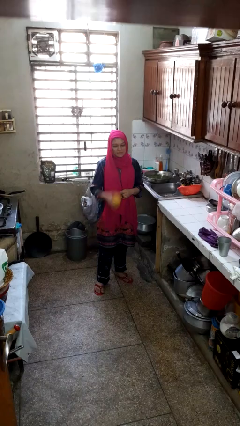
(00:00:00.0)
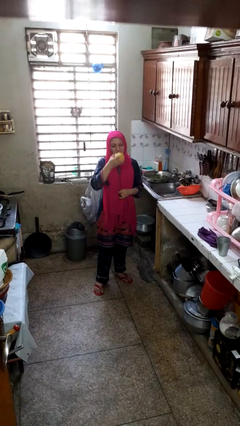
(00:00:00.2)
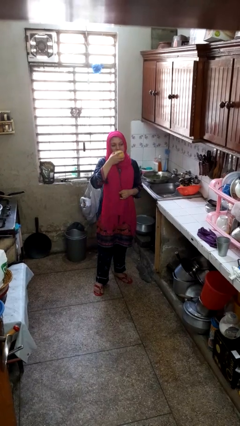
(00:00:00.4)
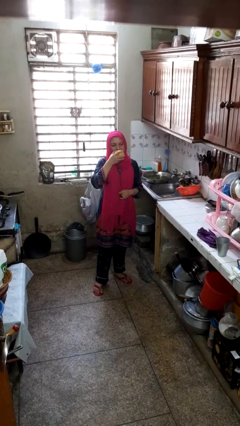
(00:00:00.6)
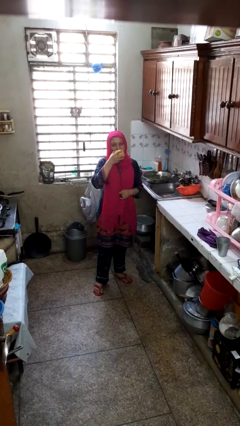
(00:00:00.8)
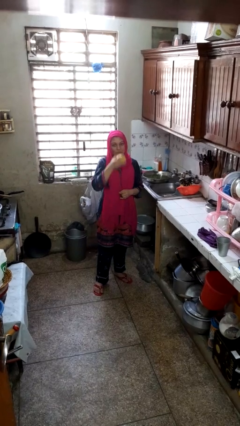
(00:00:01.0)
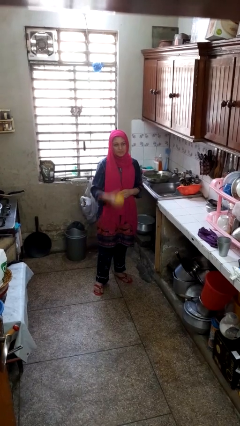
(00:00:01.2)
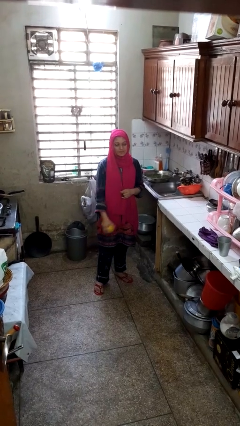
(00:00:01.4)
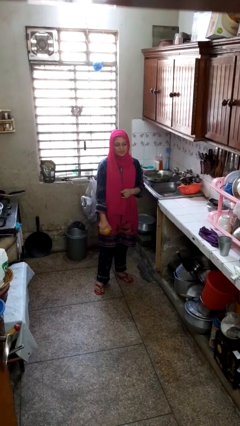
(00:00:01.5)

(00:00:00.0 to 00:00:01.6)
person eats apple

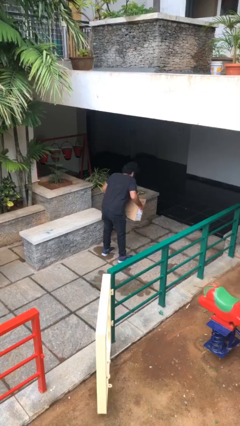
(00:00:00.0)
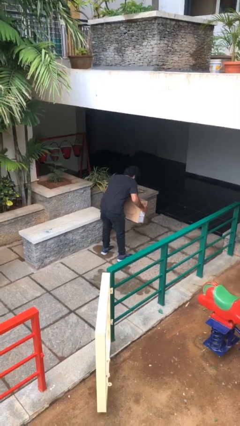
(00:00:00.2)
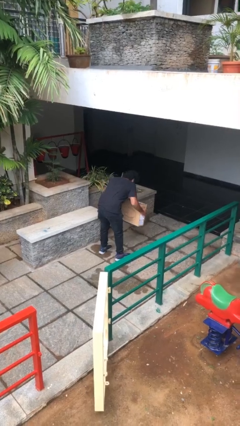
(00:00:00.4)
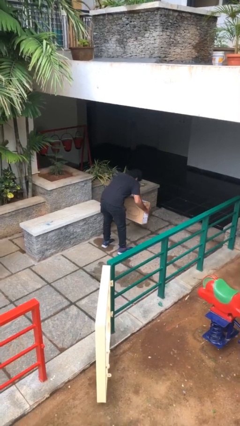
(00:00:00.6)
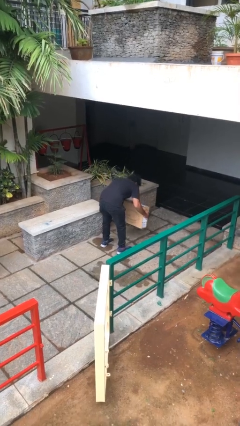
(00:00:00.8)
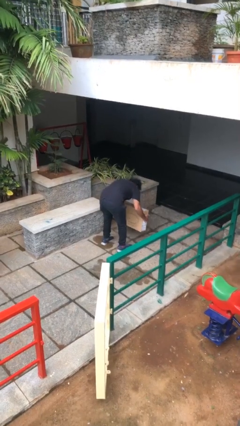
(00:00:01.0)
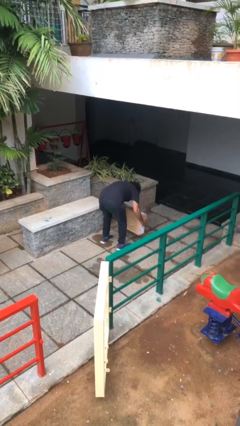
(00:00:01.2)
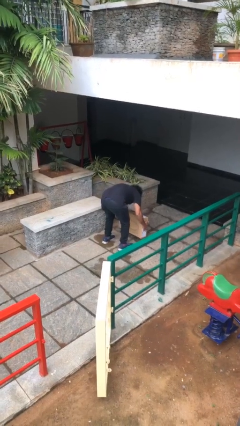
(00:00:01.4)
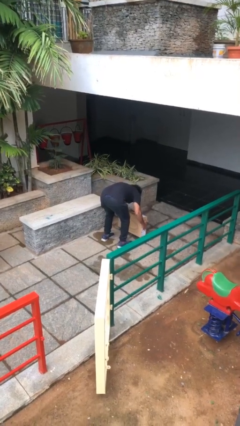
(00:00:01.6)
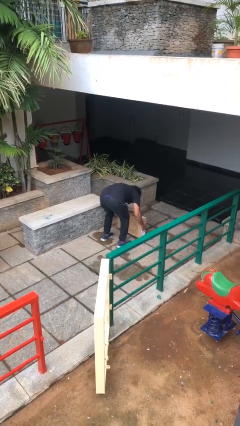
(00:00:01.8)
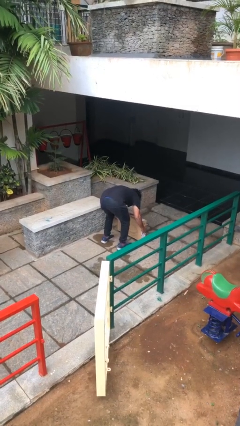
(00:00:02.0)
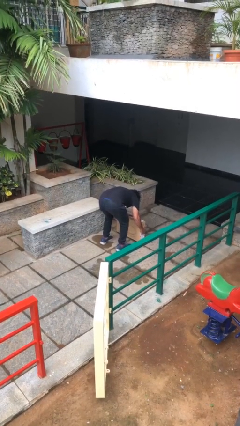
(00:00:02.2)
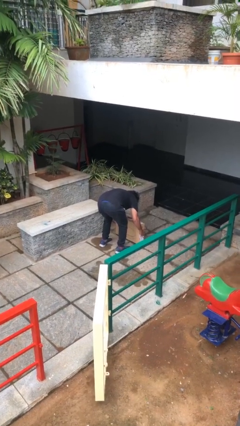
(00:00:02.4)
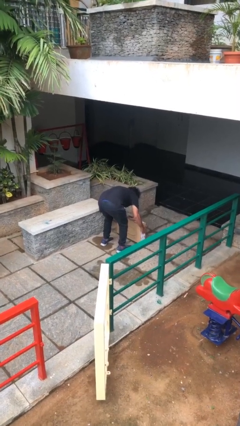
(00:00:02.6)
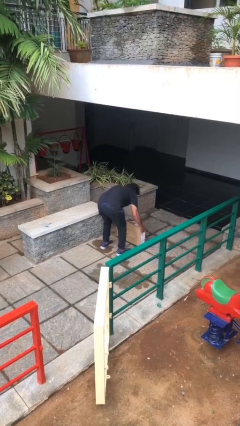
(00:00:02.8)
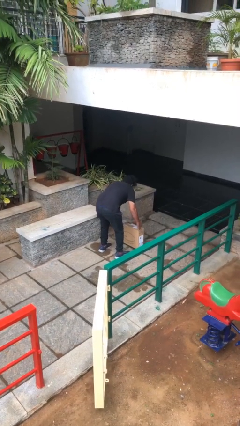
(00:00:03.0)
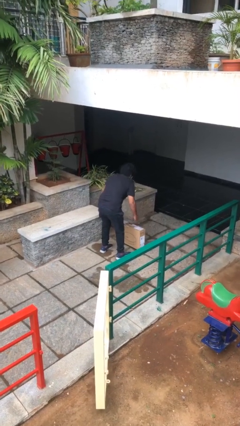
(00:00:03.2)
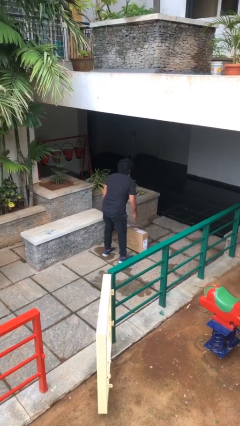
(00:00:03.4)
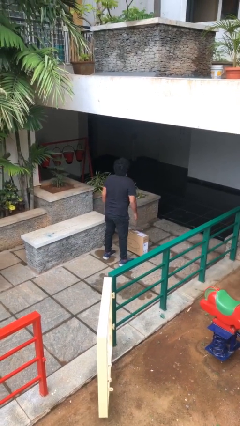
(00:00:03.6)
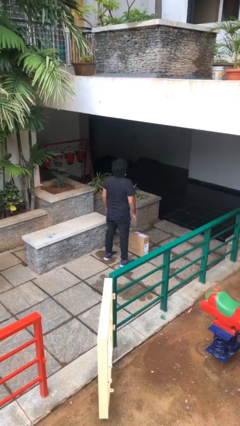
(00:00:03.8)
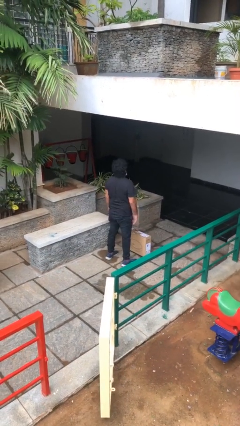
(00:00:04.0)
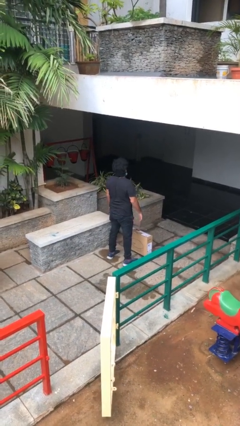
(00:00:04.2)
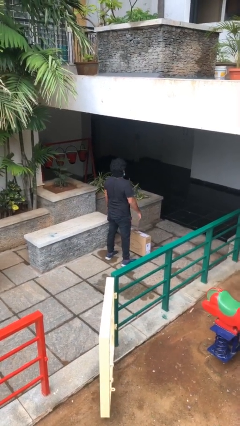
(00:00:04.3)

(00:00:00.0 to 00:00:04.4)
person puts down object on floor

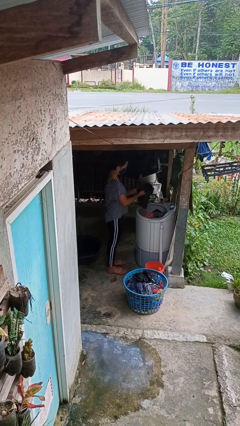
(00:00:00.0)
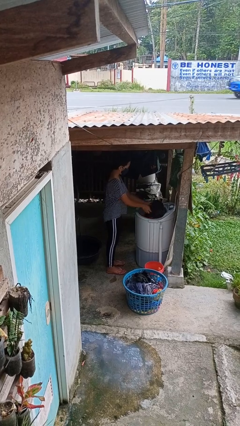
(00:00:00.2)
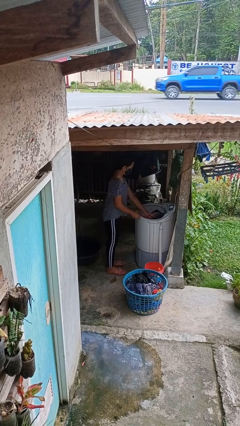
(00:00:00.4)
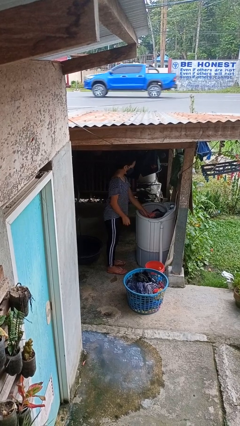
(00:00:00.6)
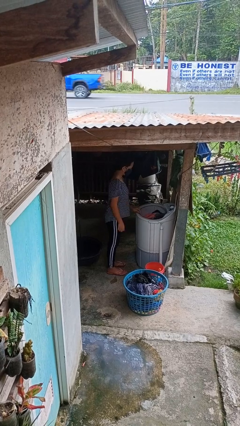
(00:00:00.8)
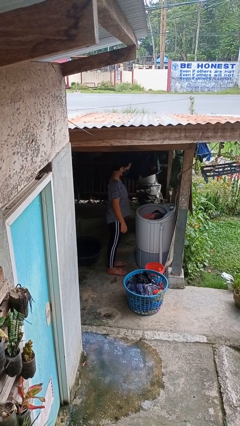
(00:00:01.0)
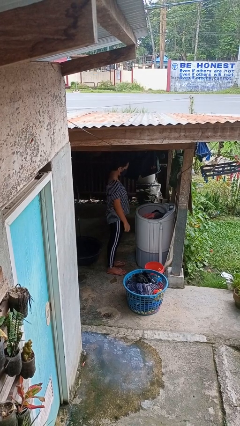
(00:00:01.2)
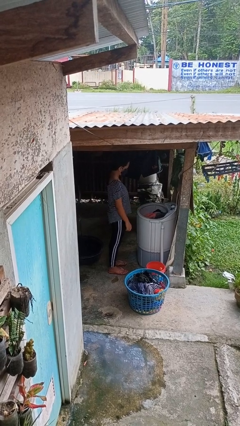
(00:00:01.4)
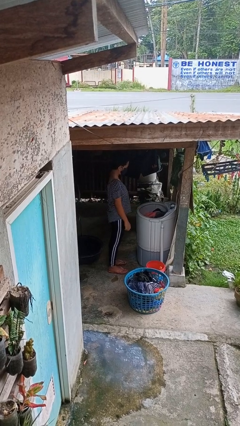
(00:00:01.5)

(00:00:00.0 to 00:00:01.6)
person loads clotheswasher

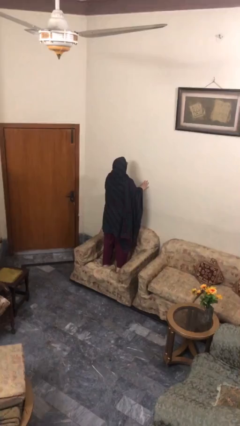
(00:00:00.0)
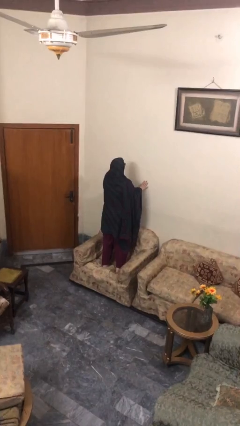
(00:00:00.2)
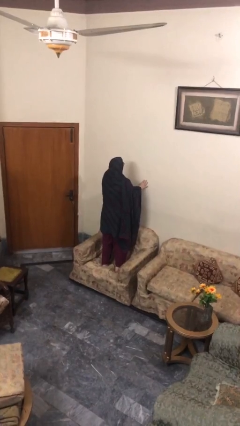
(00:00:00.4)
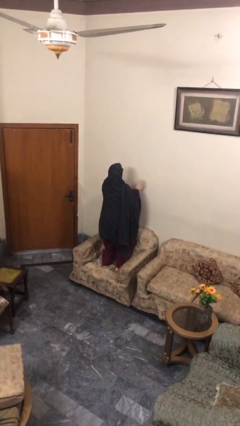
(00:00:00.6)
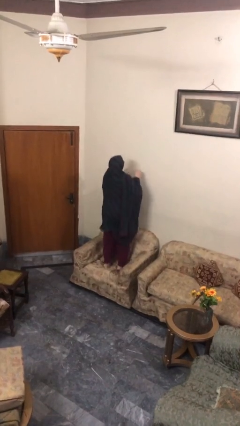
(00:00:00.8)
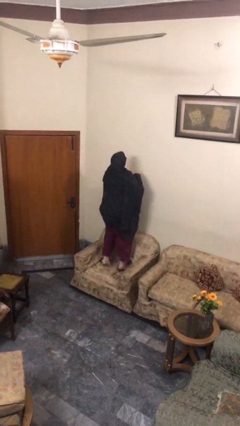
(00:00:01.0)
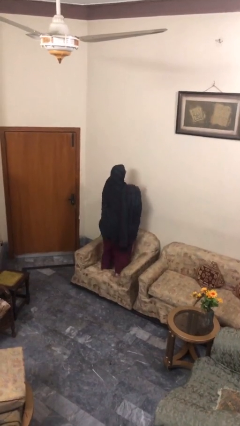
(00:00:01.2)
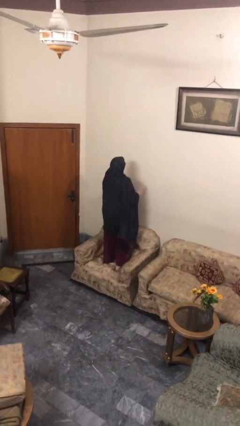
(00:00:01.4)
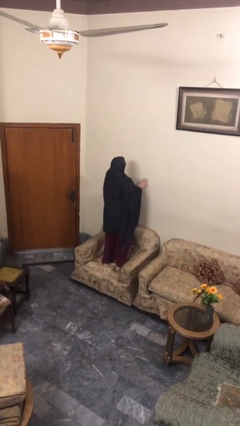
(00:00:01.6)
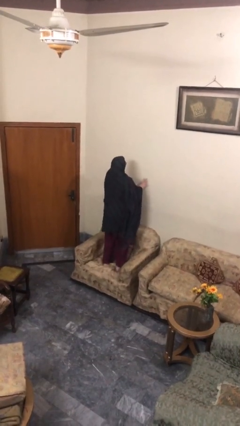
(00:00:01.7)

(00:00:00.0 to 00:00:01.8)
person jumps on couch

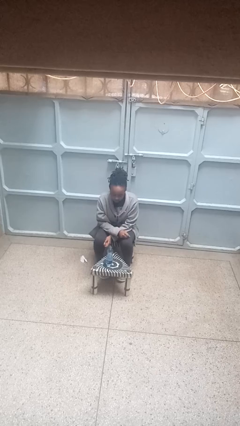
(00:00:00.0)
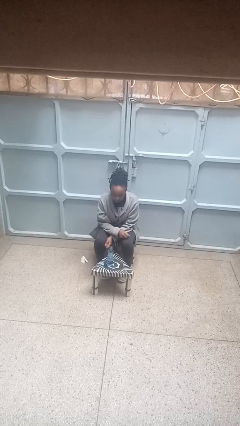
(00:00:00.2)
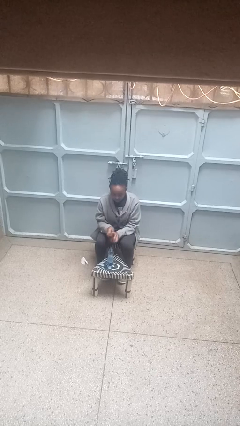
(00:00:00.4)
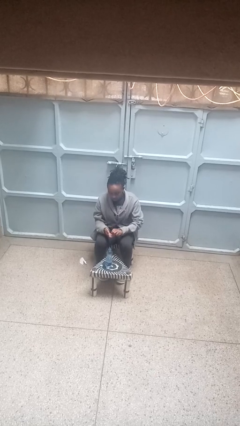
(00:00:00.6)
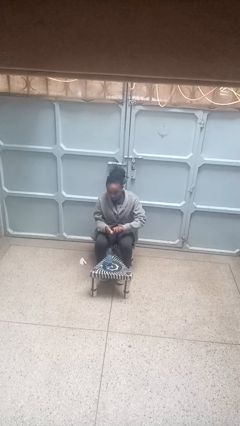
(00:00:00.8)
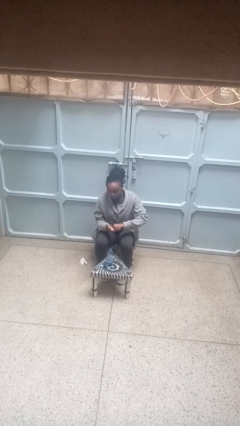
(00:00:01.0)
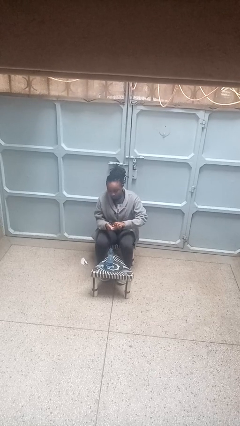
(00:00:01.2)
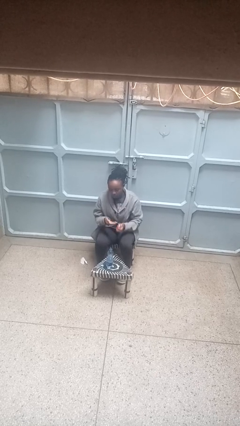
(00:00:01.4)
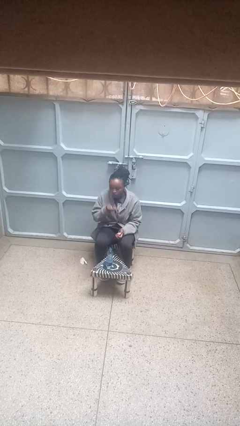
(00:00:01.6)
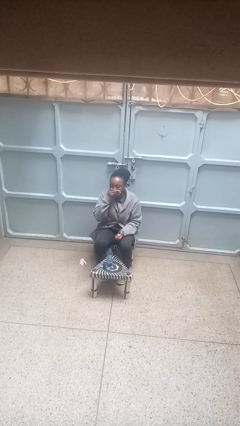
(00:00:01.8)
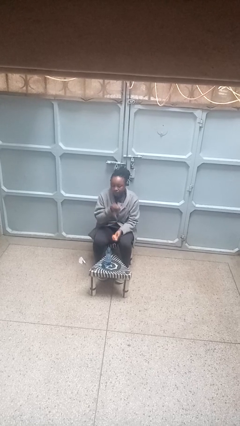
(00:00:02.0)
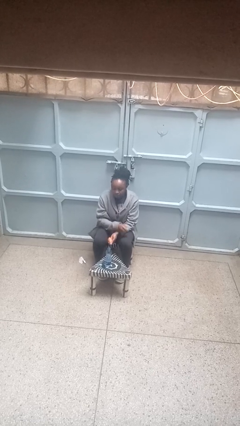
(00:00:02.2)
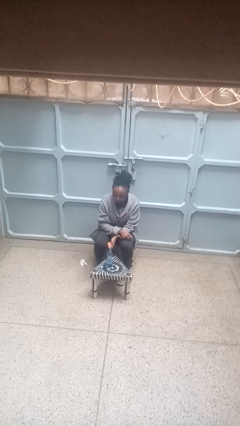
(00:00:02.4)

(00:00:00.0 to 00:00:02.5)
person takes medicine pills

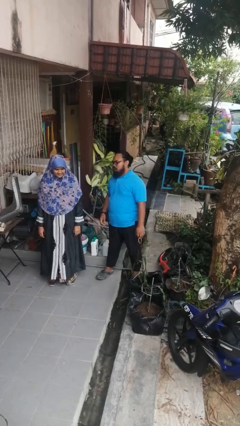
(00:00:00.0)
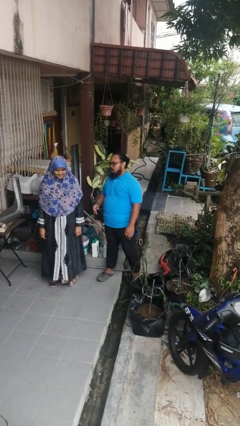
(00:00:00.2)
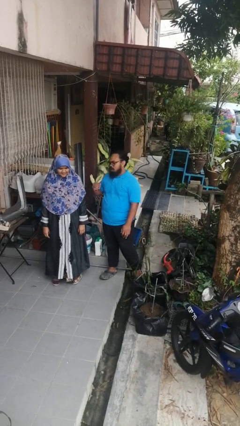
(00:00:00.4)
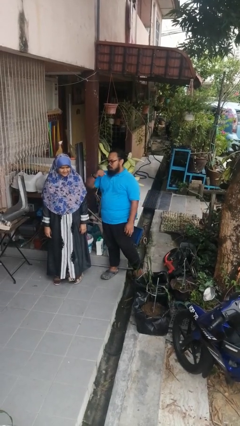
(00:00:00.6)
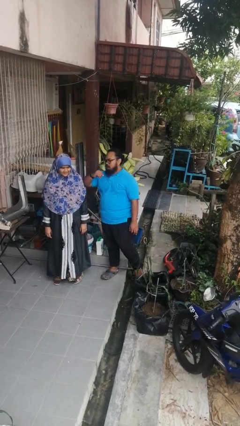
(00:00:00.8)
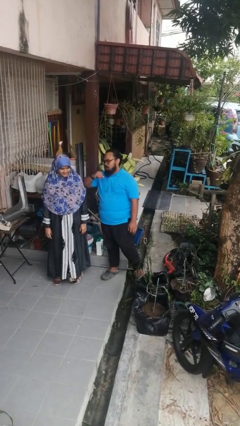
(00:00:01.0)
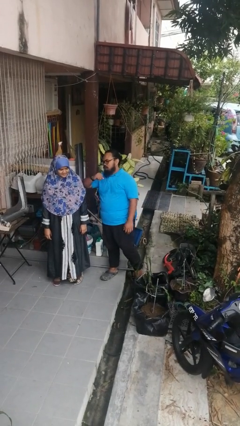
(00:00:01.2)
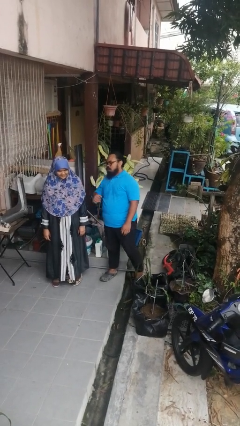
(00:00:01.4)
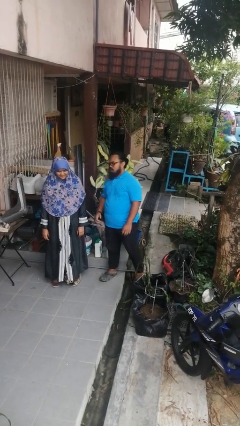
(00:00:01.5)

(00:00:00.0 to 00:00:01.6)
person nudges person with elbow

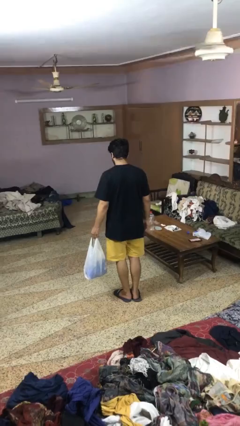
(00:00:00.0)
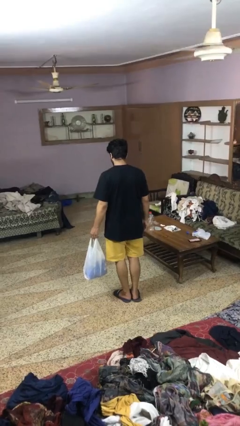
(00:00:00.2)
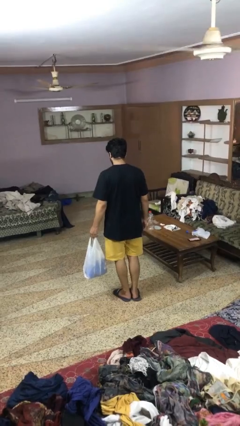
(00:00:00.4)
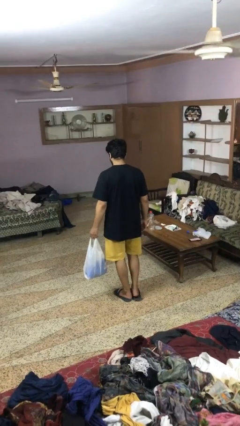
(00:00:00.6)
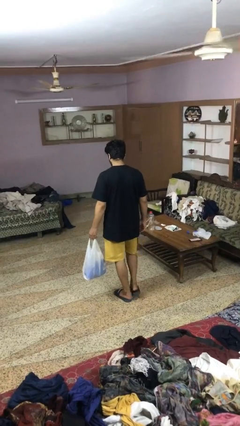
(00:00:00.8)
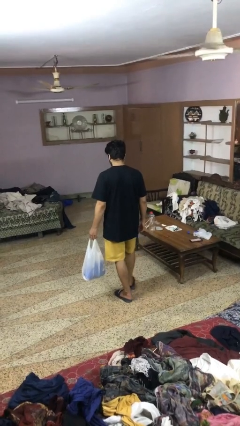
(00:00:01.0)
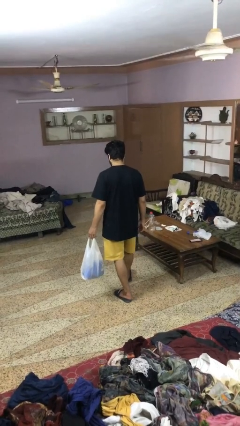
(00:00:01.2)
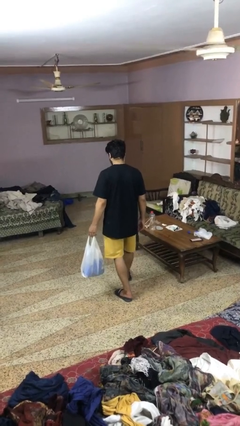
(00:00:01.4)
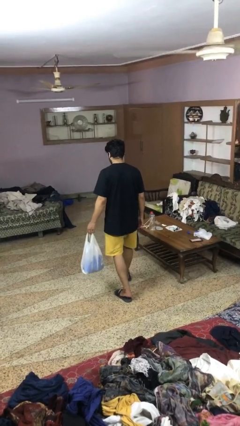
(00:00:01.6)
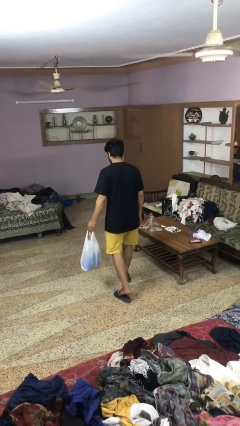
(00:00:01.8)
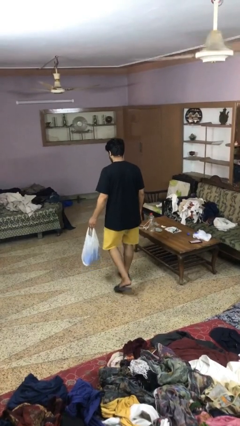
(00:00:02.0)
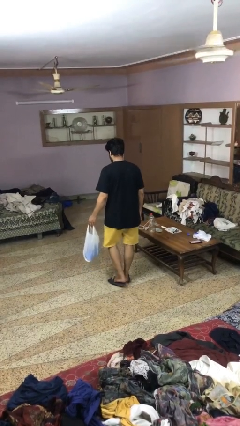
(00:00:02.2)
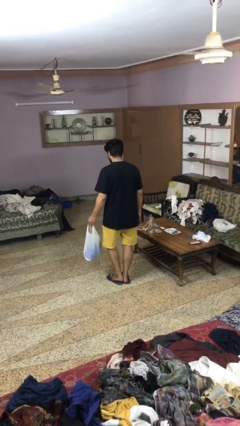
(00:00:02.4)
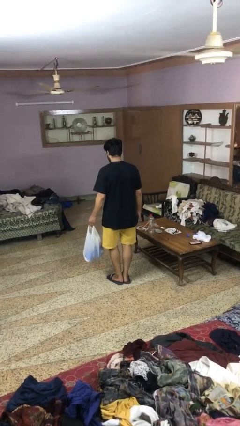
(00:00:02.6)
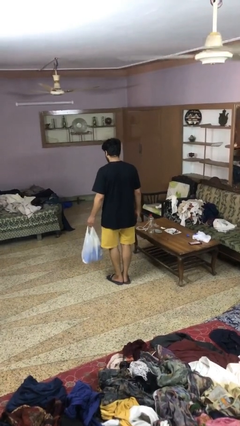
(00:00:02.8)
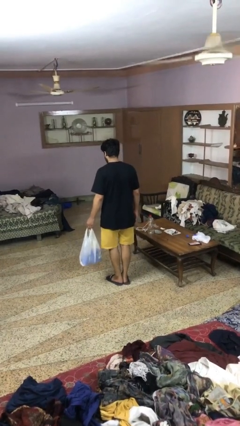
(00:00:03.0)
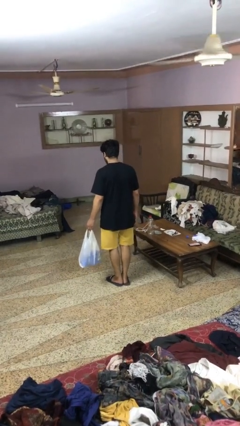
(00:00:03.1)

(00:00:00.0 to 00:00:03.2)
person carries groceries

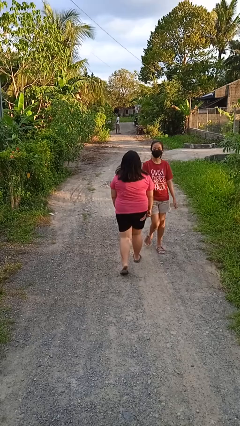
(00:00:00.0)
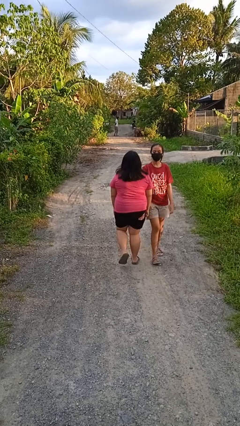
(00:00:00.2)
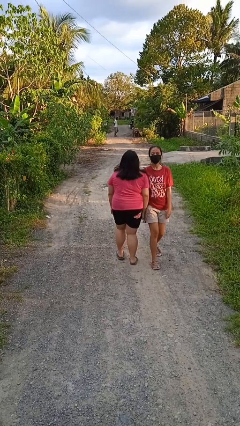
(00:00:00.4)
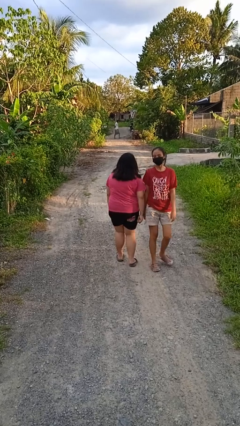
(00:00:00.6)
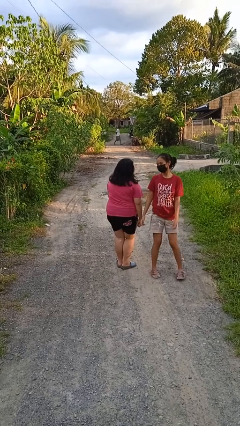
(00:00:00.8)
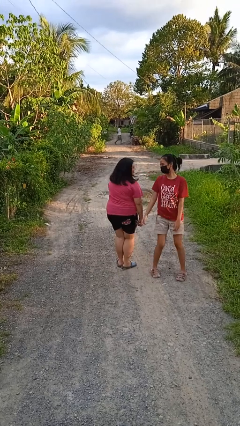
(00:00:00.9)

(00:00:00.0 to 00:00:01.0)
person bumps into person
